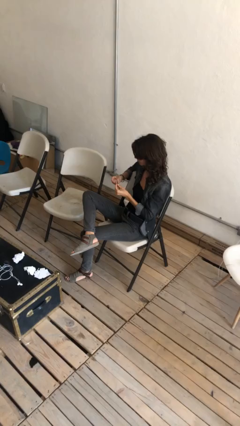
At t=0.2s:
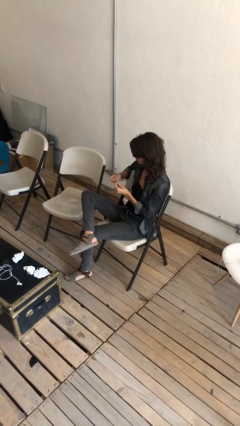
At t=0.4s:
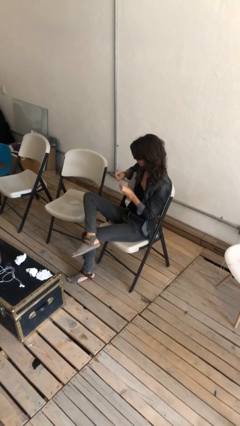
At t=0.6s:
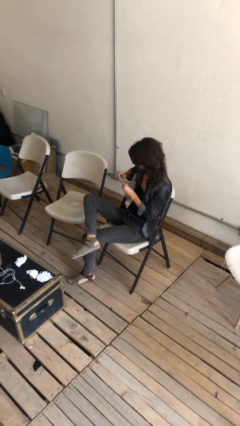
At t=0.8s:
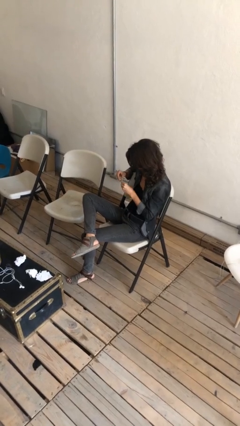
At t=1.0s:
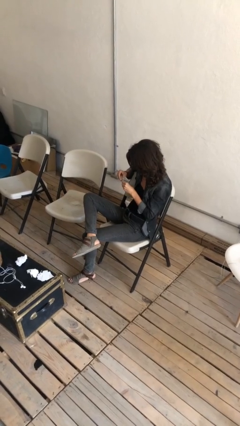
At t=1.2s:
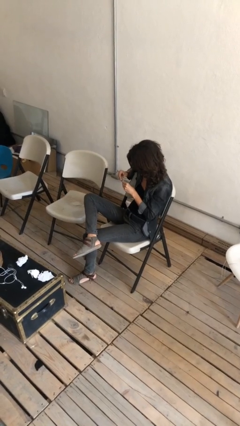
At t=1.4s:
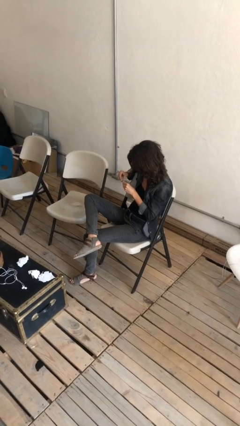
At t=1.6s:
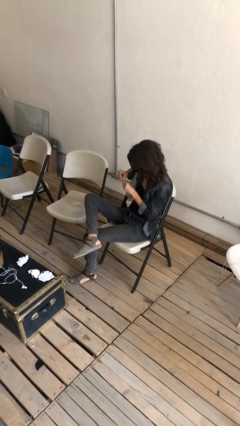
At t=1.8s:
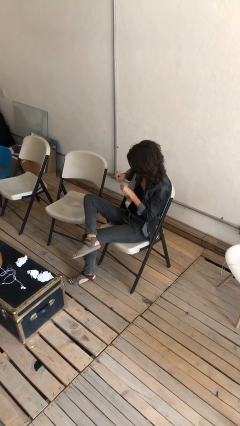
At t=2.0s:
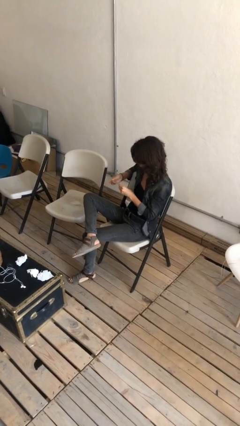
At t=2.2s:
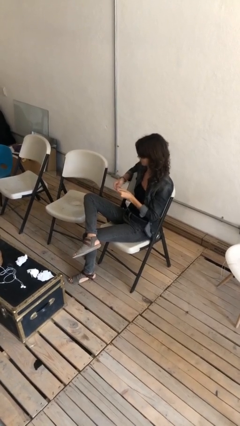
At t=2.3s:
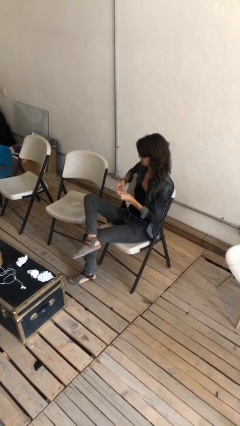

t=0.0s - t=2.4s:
person clips fingernails

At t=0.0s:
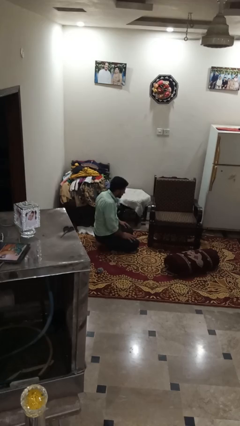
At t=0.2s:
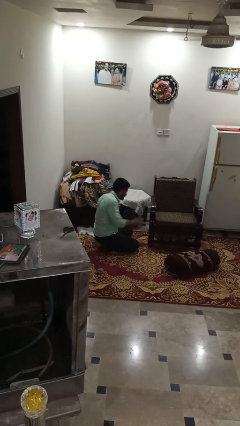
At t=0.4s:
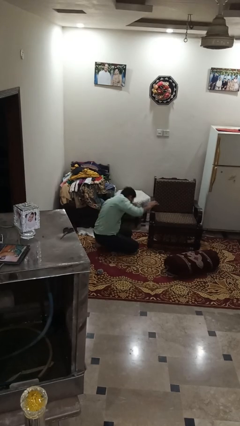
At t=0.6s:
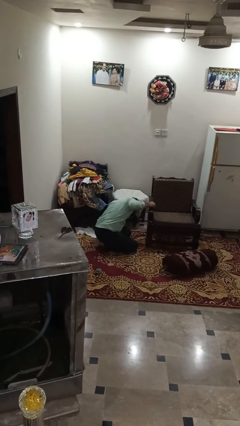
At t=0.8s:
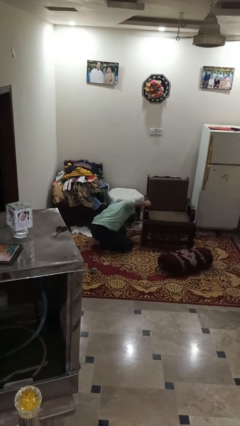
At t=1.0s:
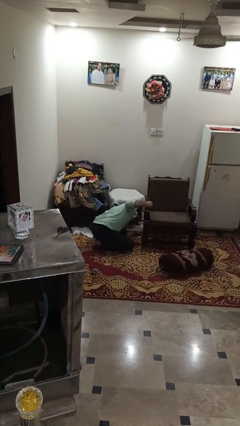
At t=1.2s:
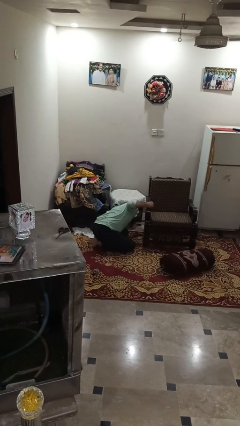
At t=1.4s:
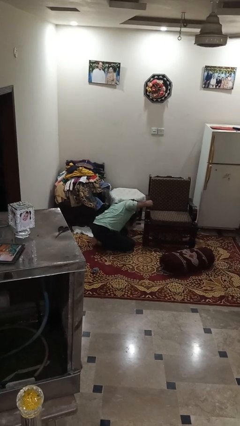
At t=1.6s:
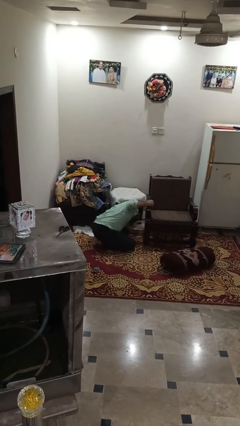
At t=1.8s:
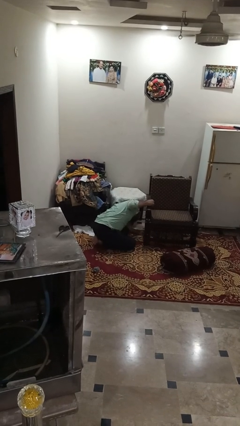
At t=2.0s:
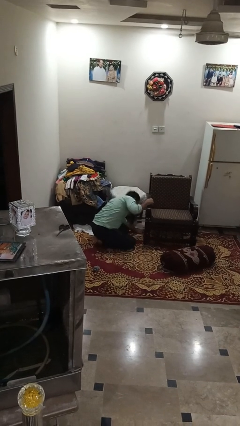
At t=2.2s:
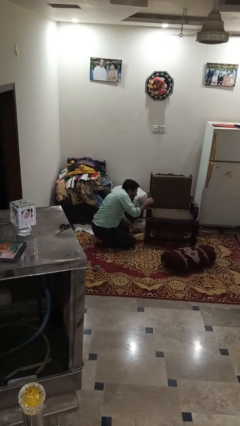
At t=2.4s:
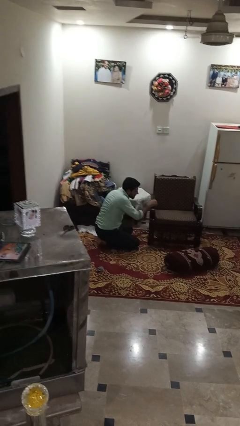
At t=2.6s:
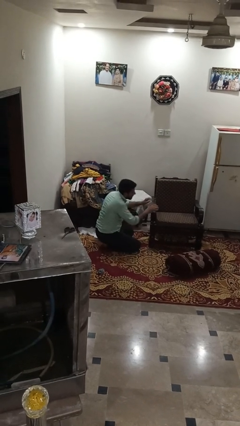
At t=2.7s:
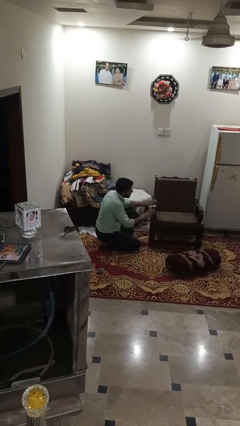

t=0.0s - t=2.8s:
person searches in couch

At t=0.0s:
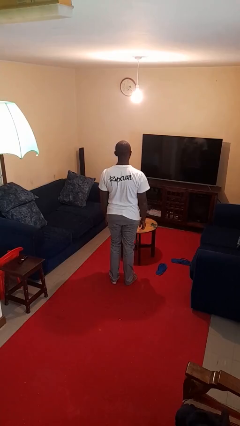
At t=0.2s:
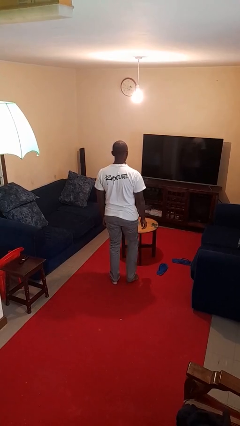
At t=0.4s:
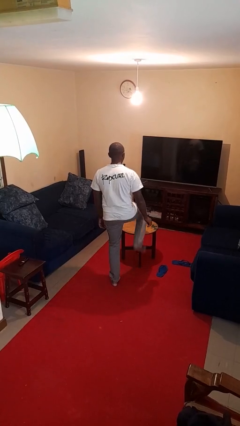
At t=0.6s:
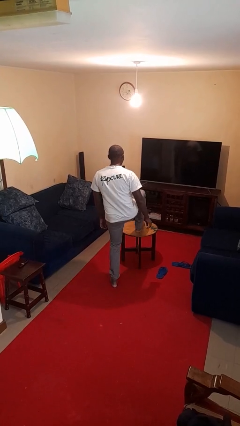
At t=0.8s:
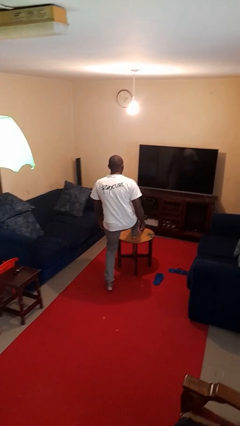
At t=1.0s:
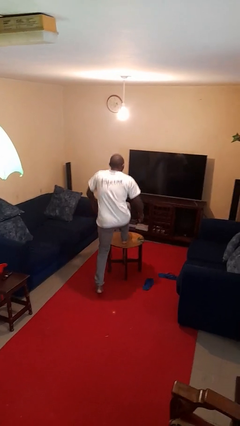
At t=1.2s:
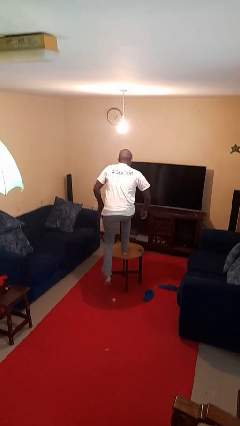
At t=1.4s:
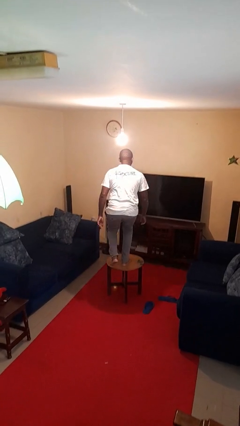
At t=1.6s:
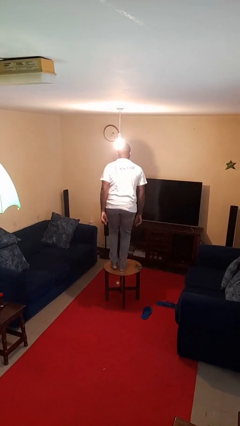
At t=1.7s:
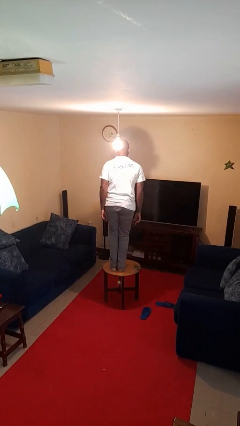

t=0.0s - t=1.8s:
person climbs on table

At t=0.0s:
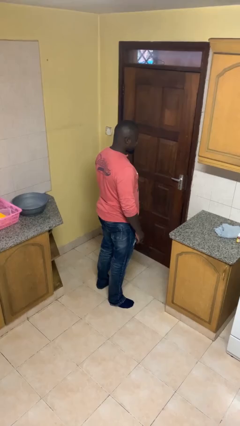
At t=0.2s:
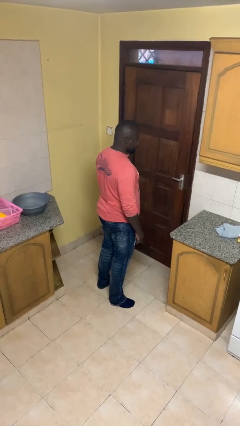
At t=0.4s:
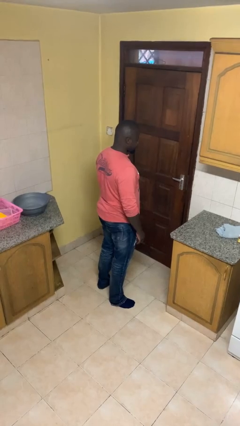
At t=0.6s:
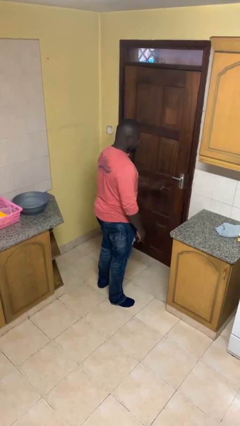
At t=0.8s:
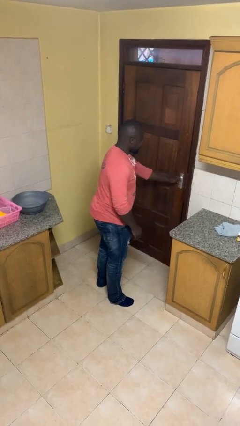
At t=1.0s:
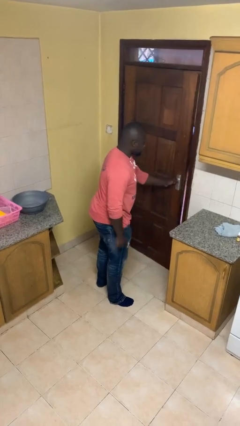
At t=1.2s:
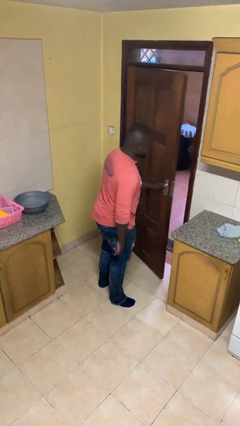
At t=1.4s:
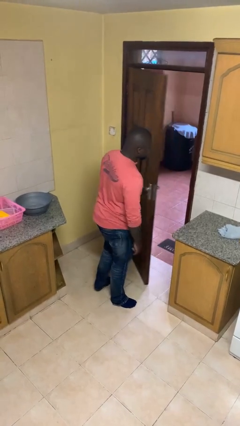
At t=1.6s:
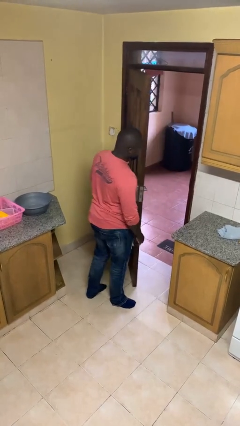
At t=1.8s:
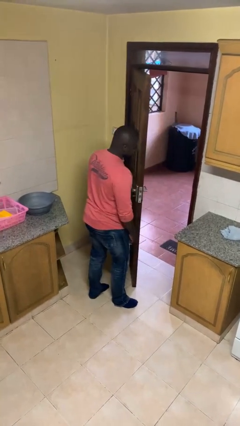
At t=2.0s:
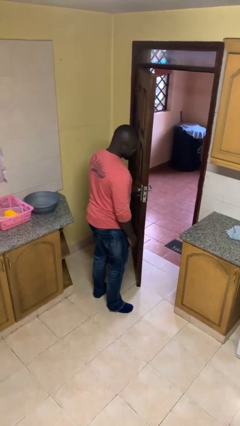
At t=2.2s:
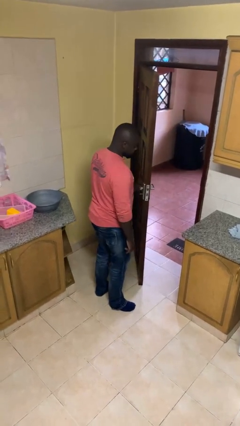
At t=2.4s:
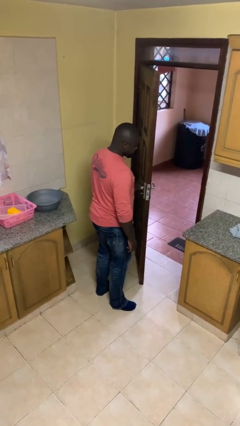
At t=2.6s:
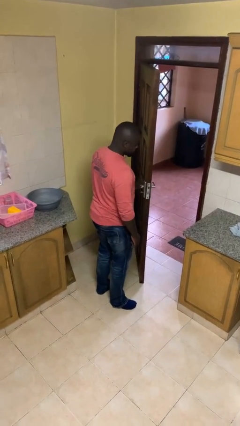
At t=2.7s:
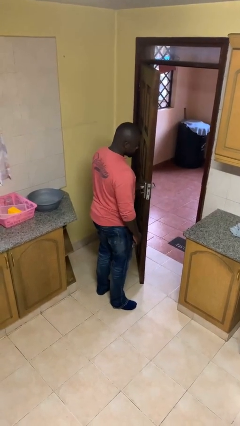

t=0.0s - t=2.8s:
person opens facility door

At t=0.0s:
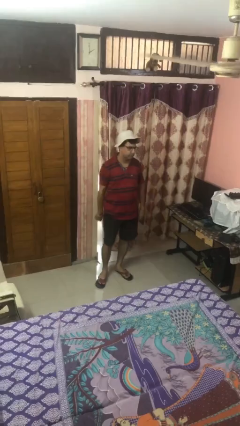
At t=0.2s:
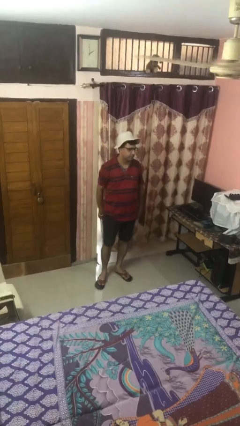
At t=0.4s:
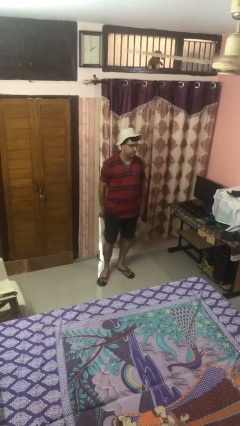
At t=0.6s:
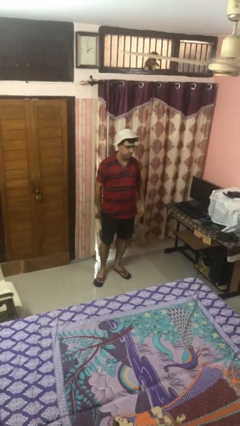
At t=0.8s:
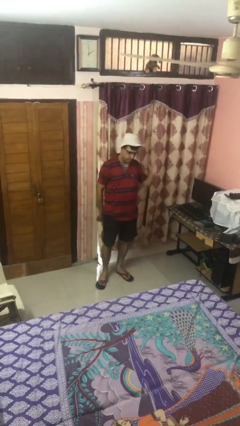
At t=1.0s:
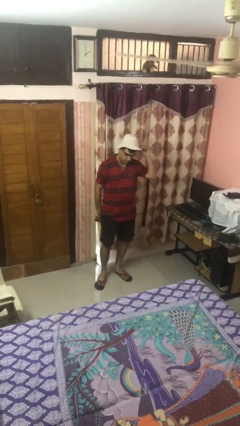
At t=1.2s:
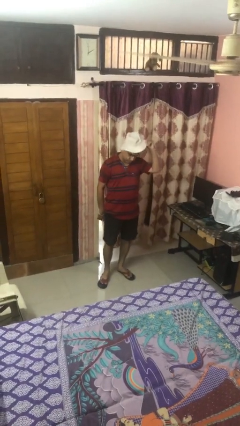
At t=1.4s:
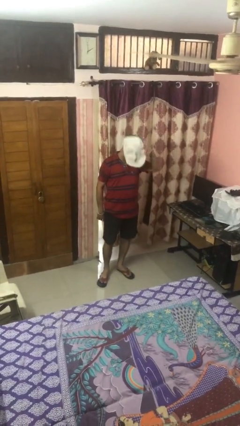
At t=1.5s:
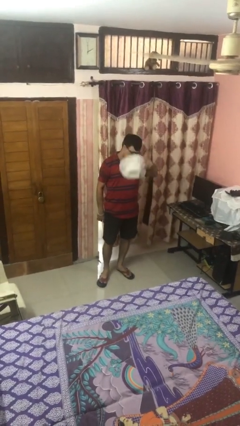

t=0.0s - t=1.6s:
person takes off hat

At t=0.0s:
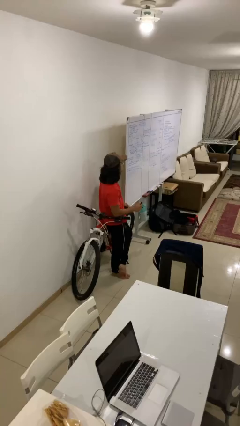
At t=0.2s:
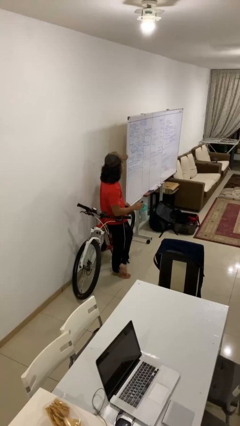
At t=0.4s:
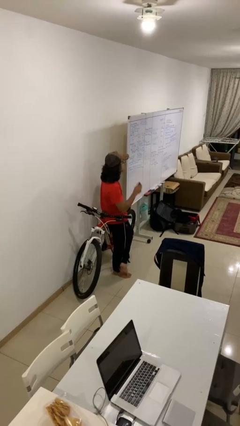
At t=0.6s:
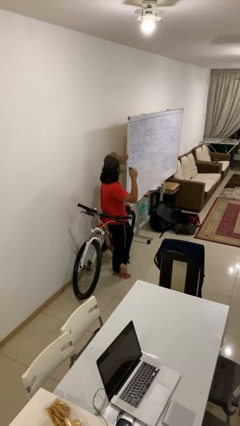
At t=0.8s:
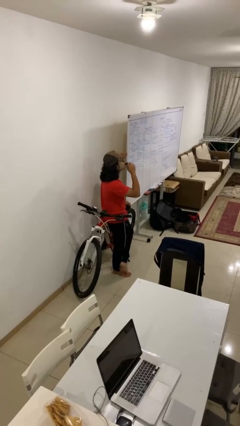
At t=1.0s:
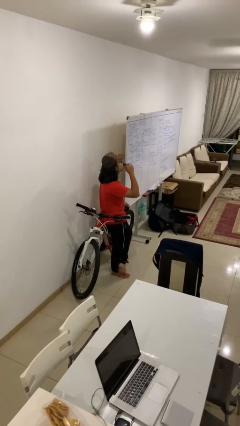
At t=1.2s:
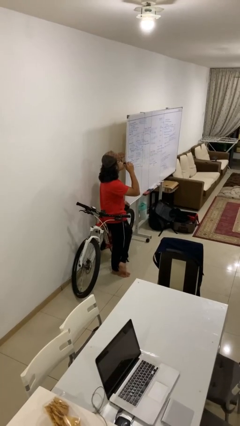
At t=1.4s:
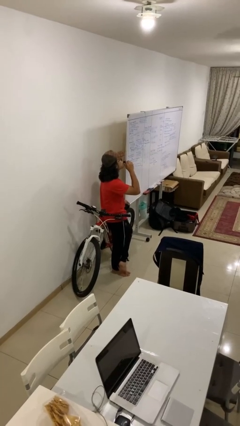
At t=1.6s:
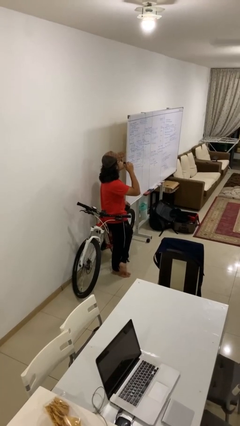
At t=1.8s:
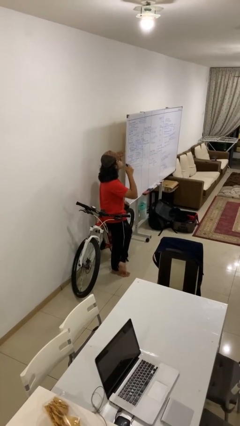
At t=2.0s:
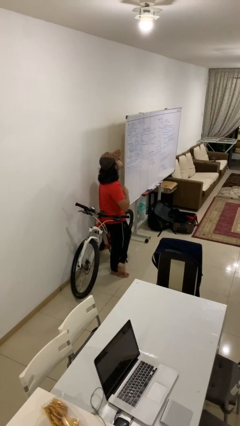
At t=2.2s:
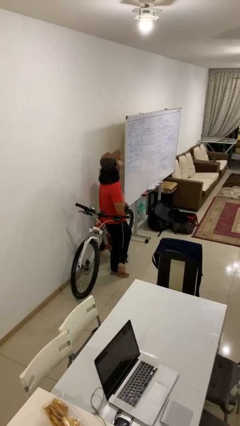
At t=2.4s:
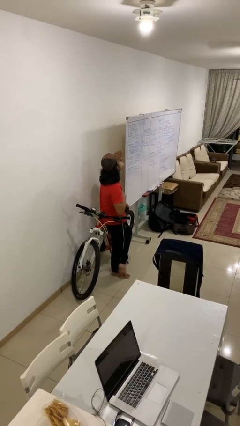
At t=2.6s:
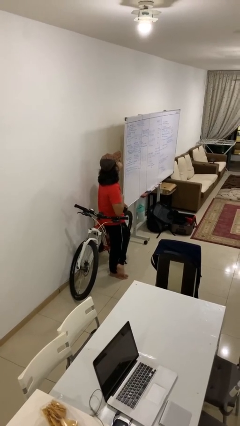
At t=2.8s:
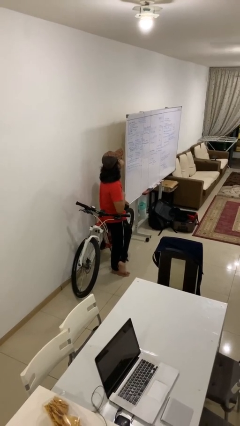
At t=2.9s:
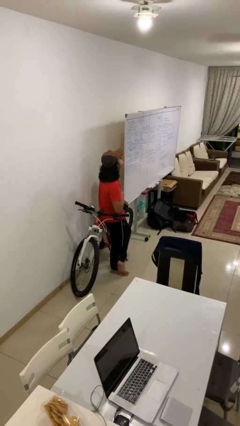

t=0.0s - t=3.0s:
person vapes

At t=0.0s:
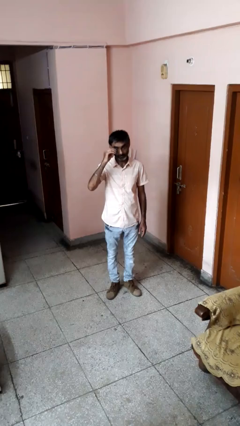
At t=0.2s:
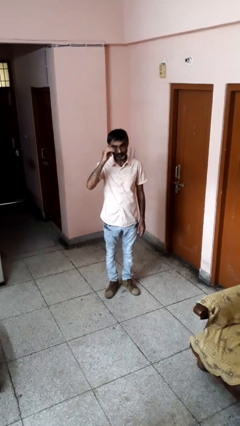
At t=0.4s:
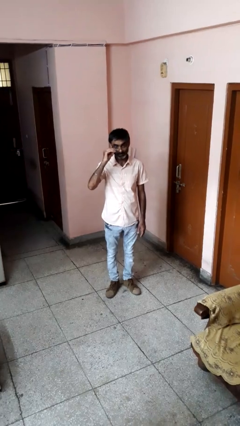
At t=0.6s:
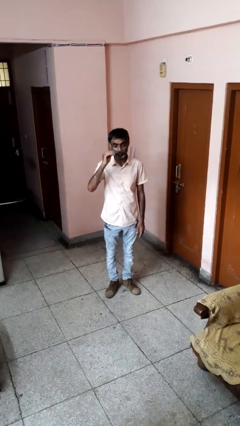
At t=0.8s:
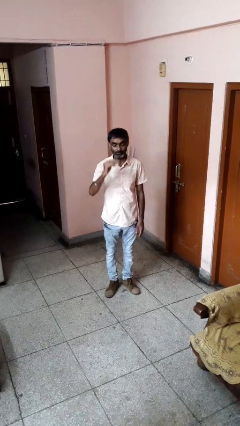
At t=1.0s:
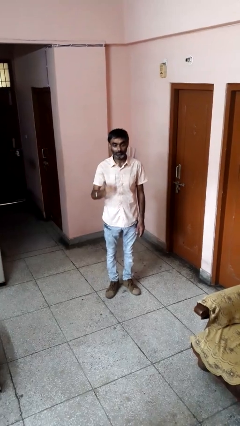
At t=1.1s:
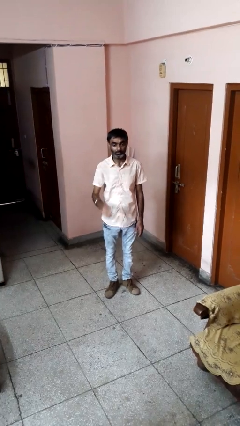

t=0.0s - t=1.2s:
person takes off glasses

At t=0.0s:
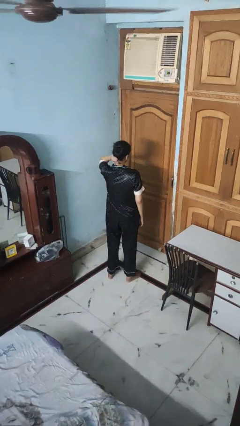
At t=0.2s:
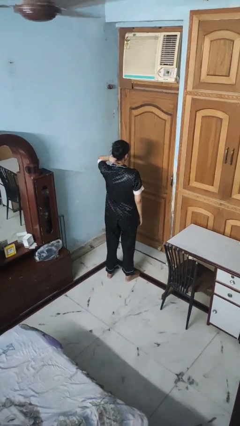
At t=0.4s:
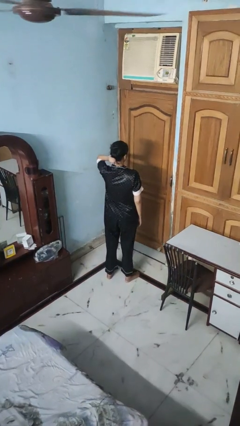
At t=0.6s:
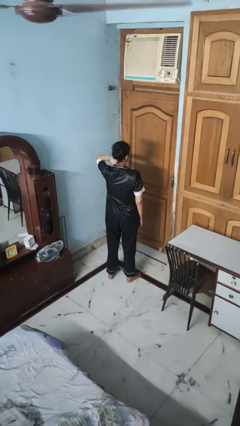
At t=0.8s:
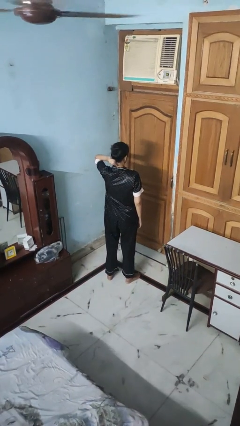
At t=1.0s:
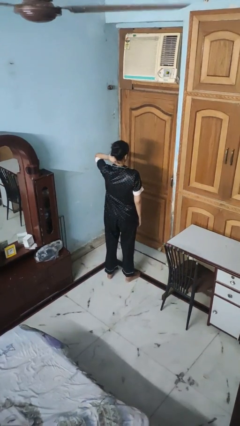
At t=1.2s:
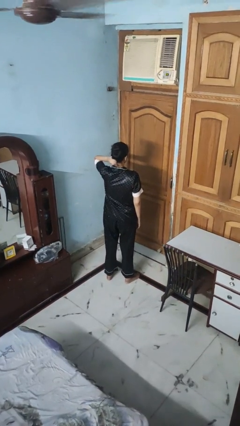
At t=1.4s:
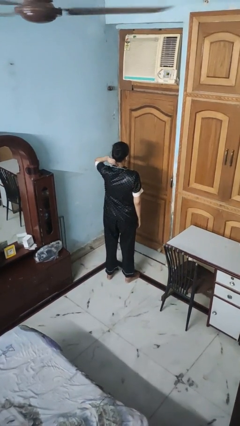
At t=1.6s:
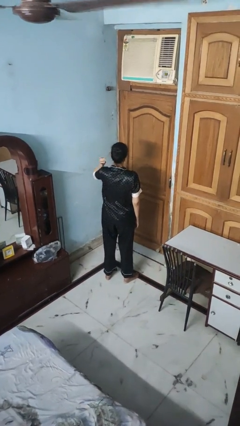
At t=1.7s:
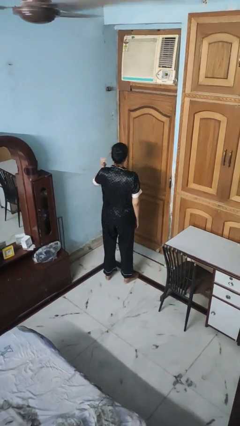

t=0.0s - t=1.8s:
person rubs neck
